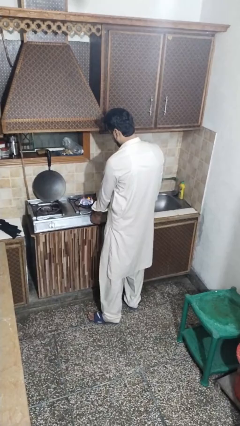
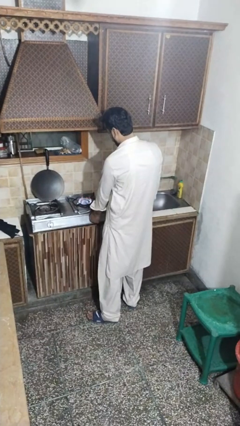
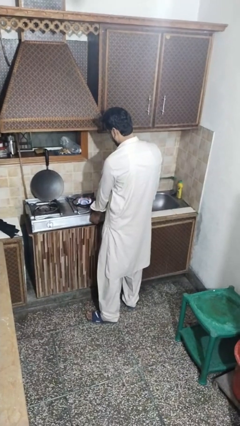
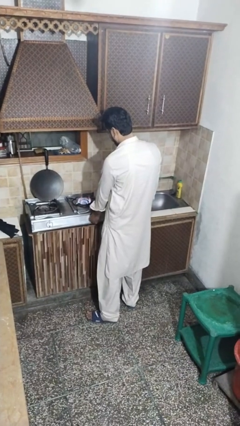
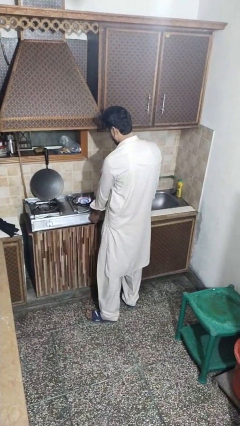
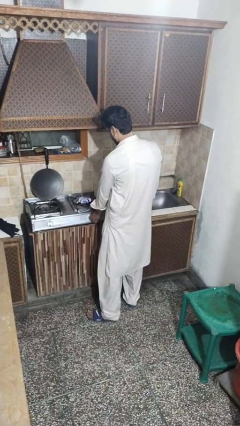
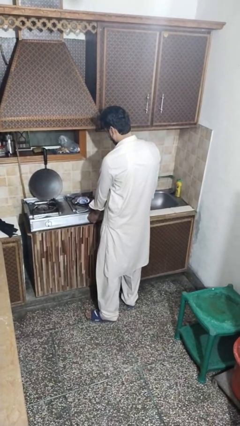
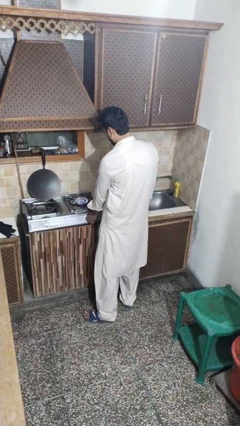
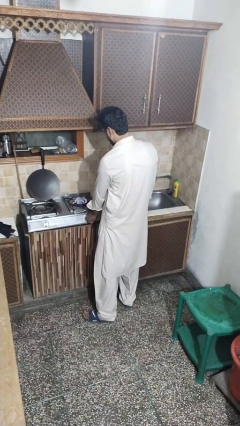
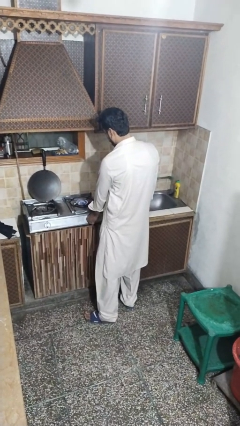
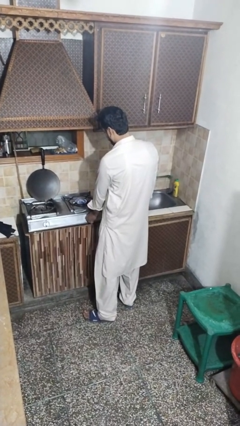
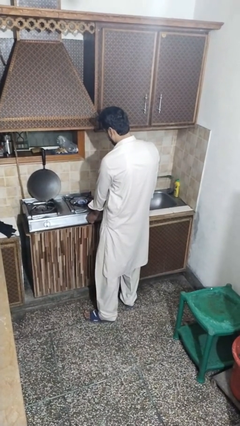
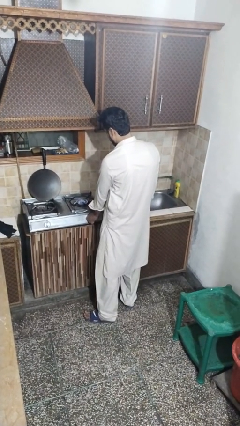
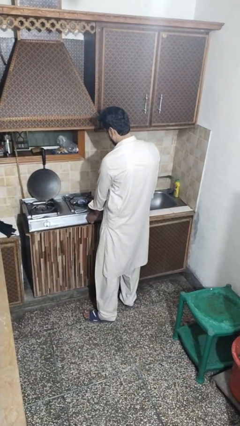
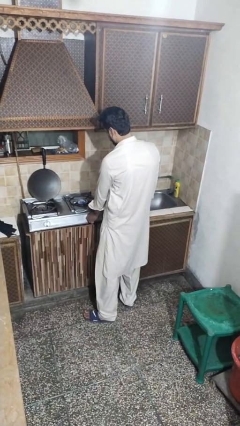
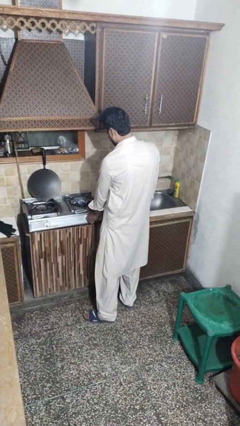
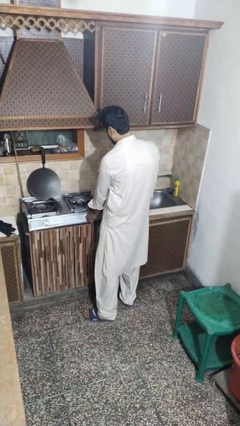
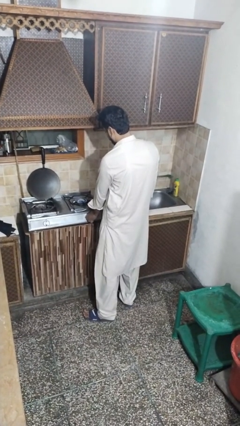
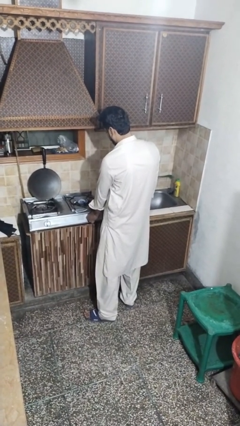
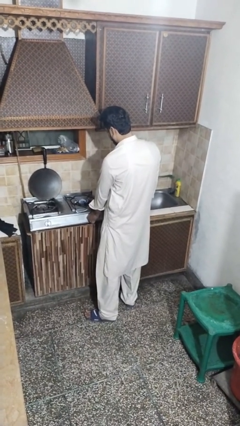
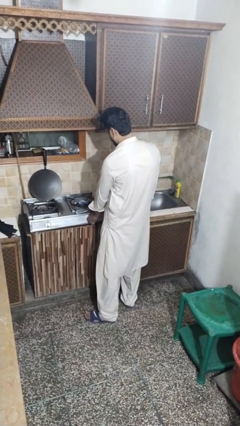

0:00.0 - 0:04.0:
person turns off stovetop

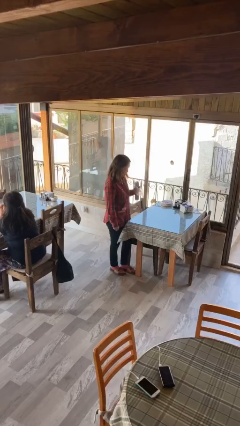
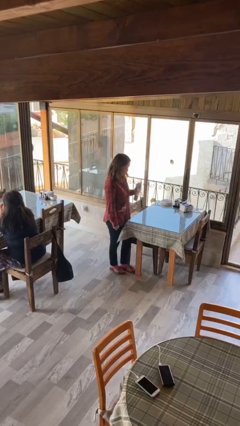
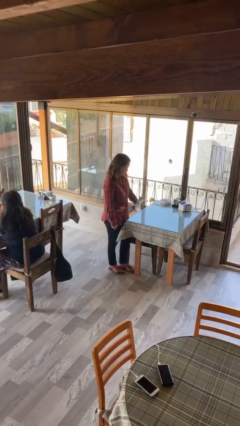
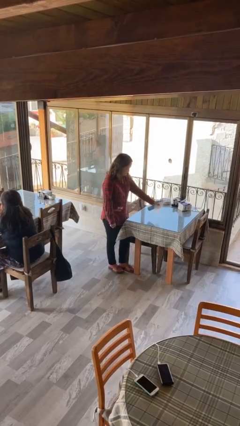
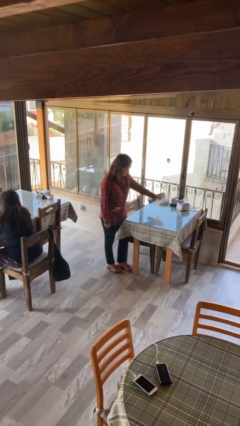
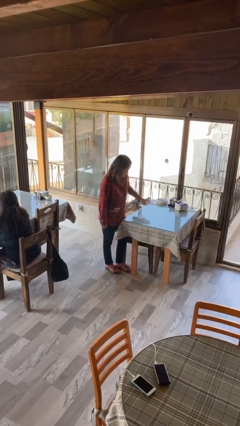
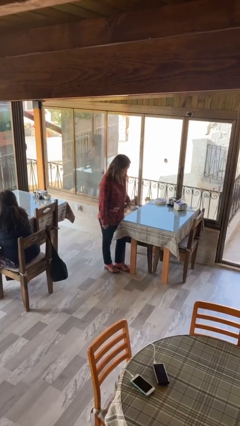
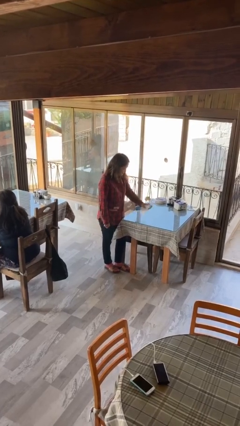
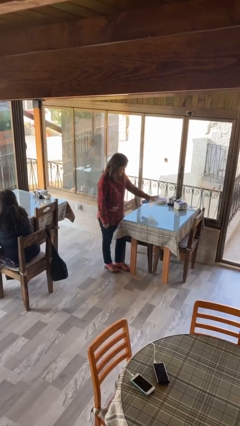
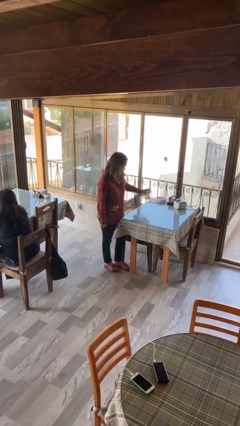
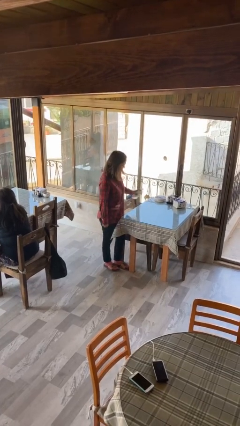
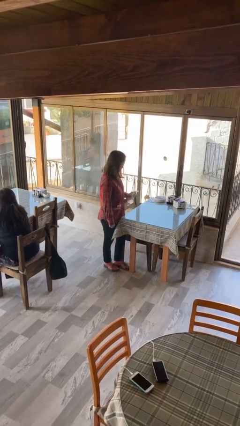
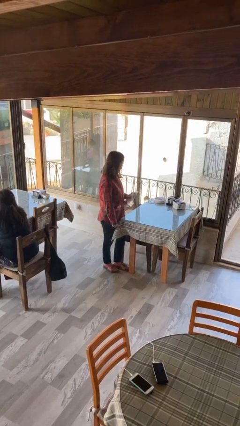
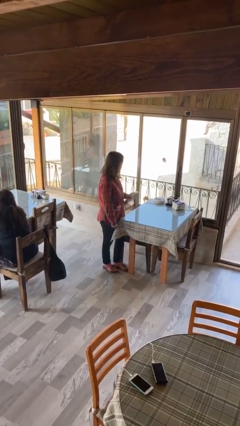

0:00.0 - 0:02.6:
person sprays from bottle

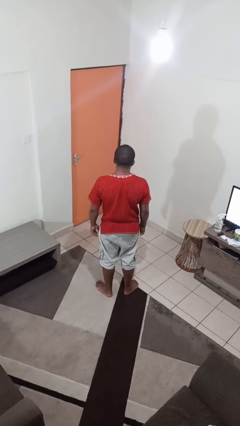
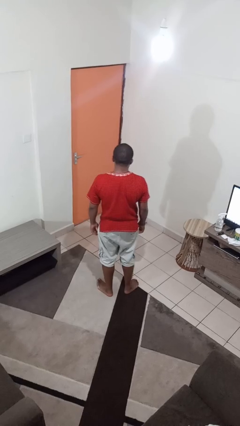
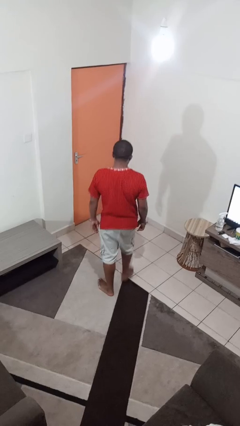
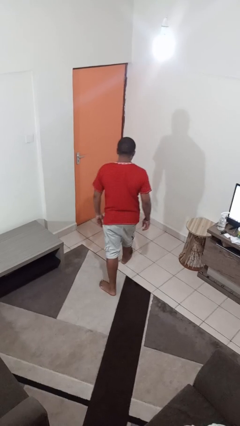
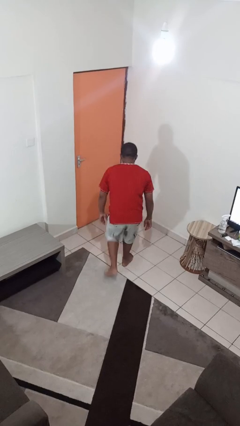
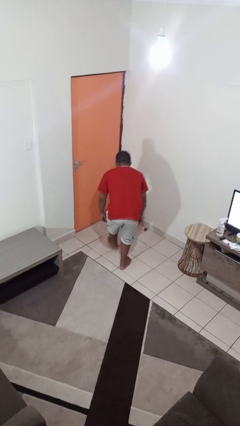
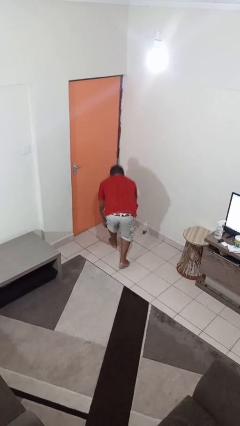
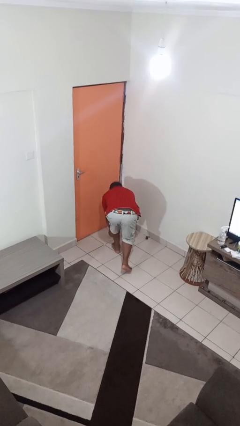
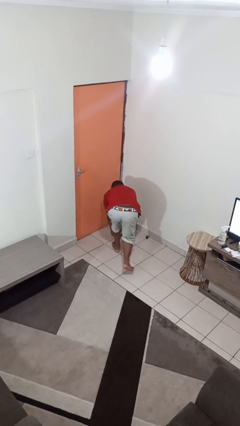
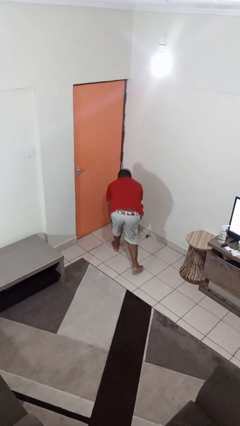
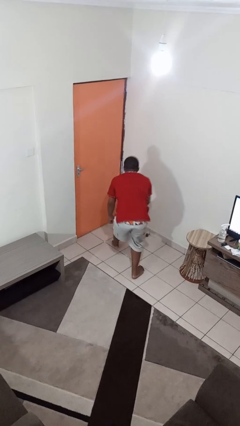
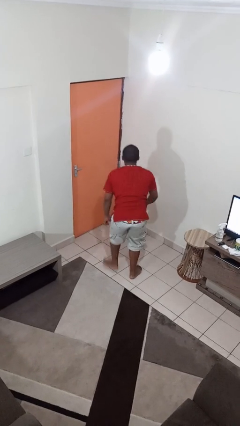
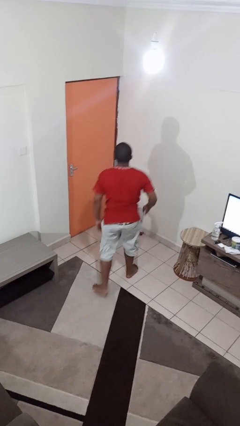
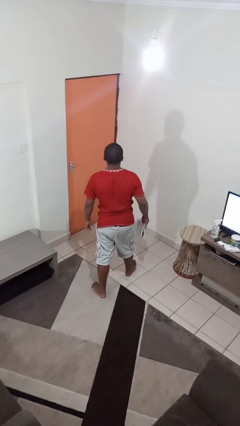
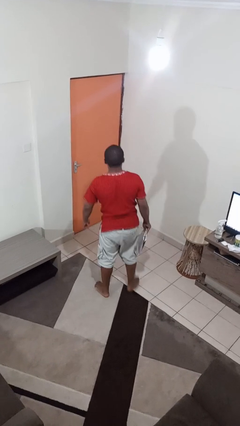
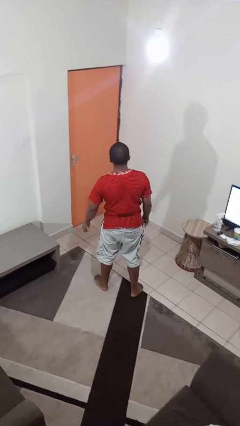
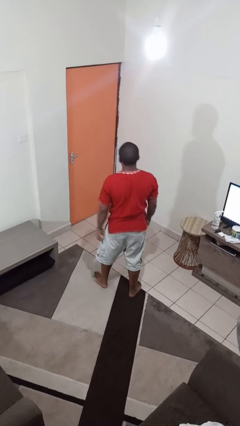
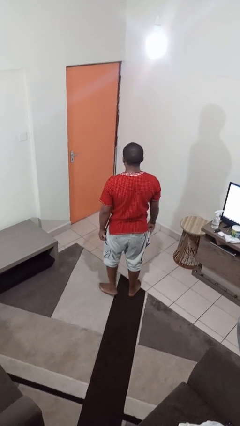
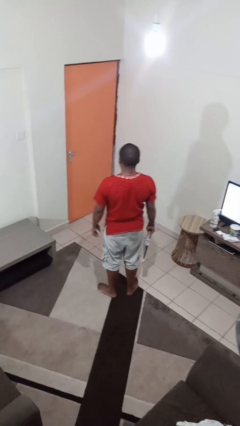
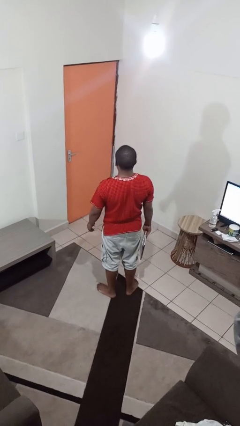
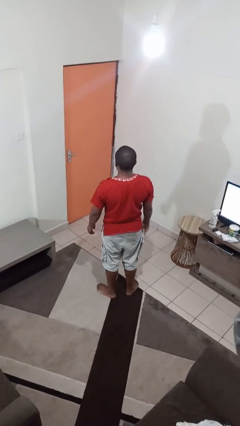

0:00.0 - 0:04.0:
person picks up object from floor

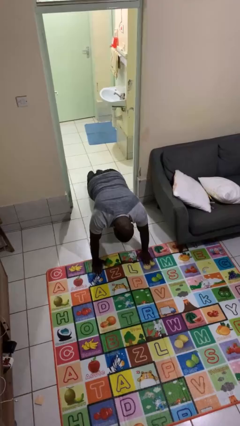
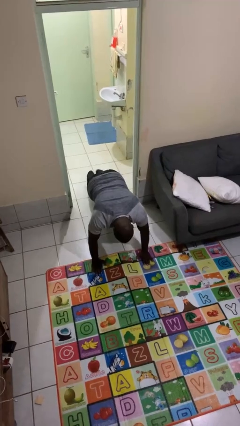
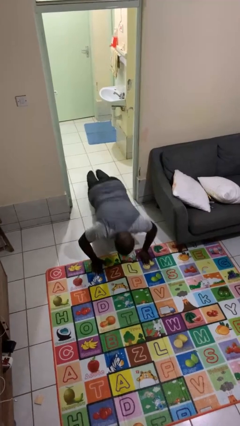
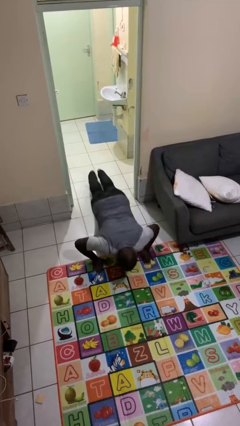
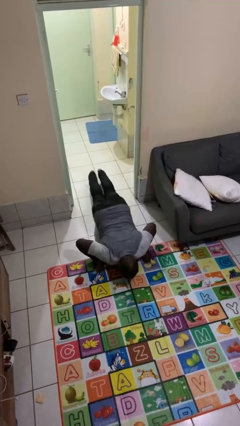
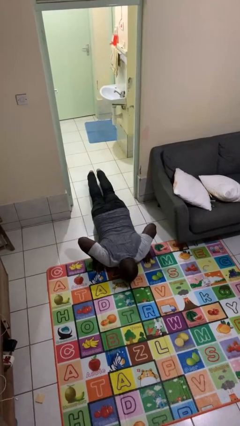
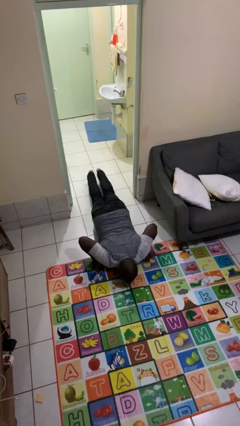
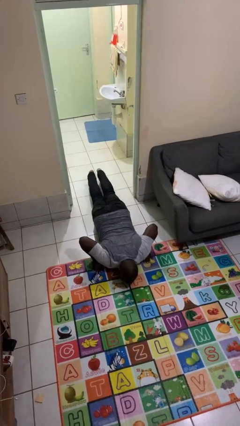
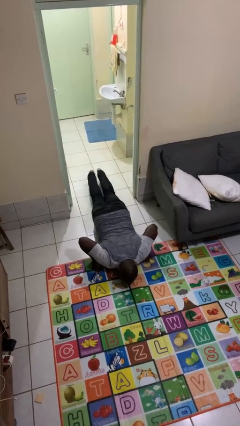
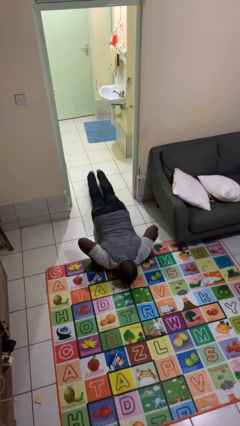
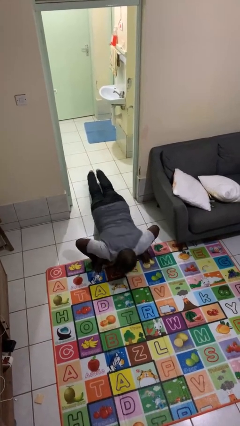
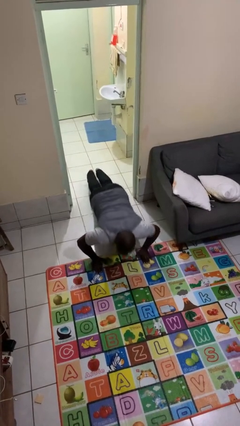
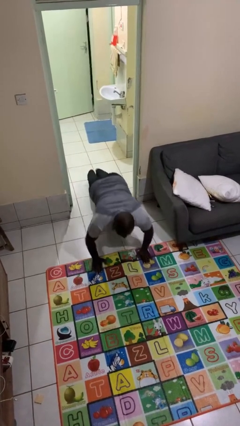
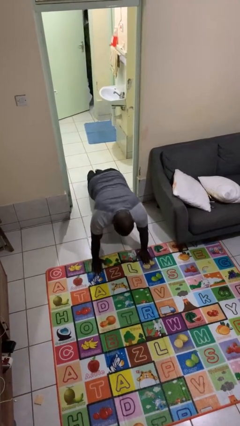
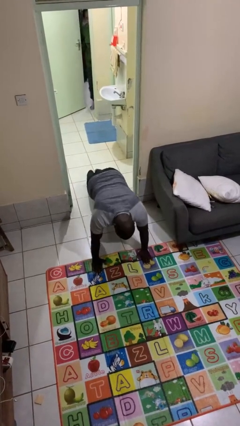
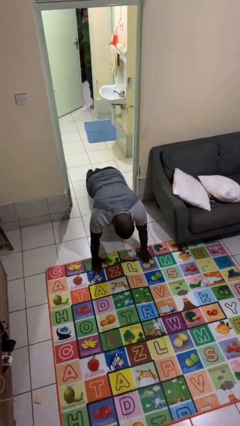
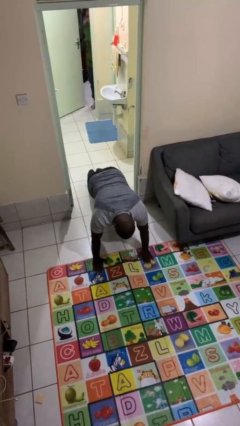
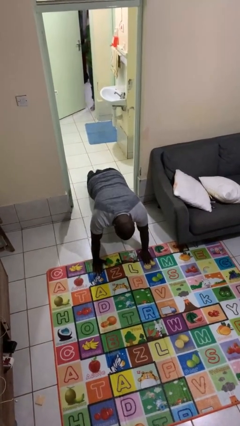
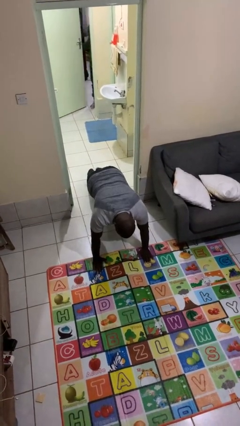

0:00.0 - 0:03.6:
person exercises with pushup

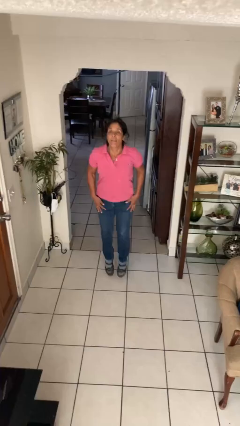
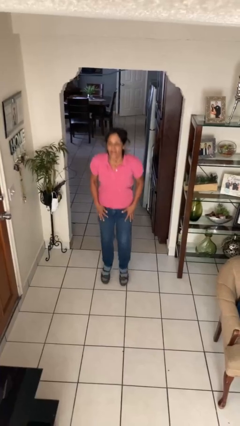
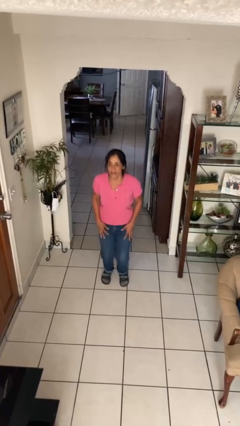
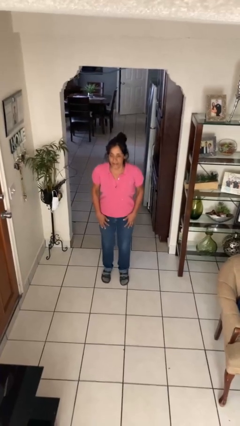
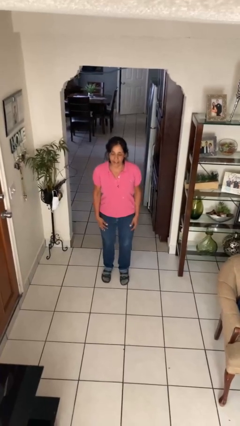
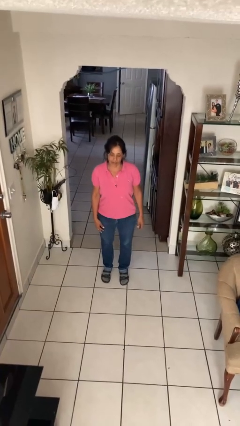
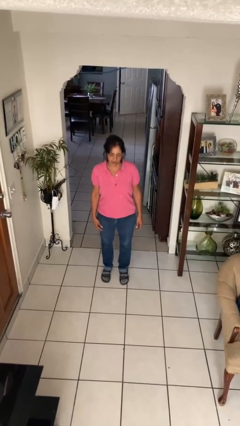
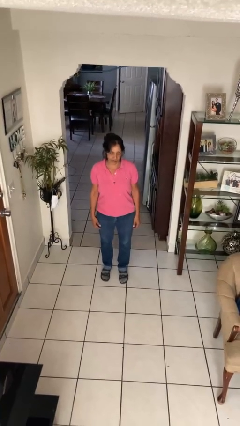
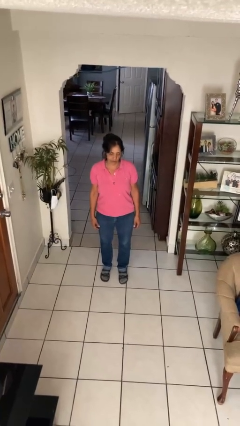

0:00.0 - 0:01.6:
person jumps

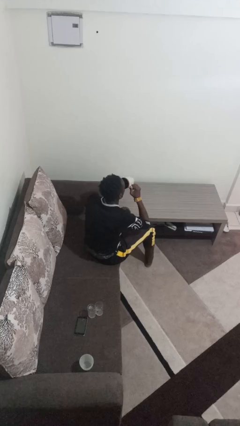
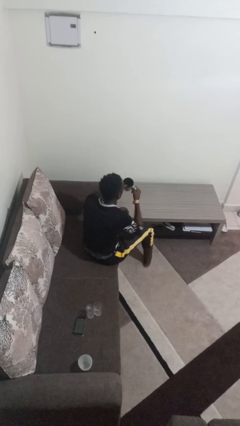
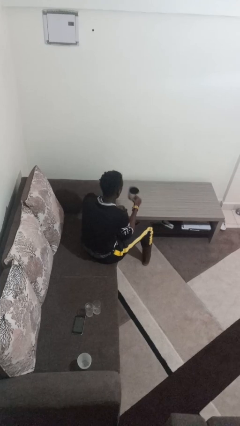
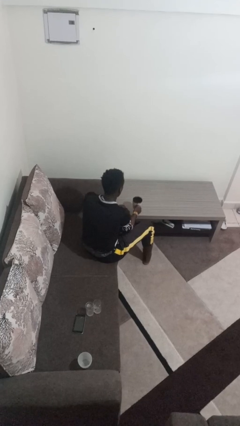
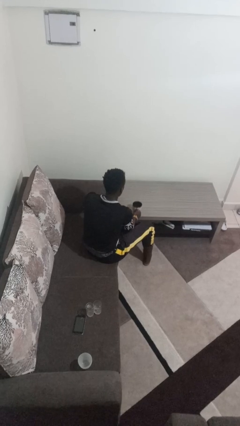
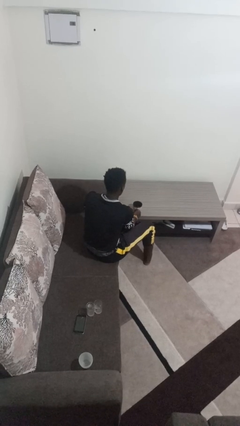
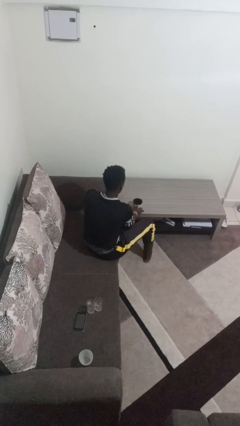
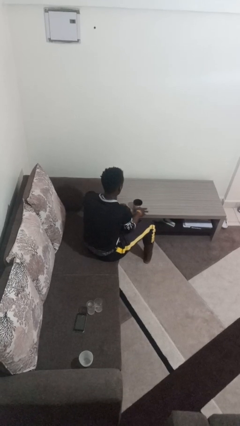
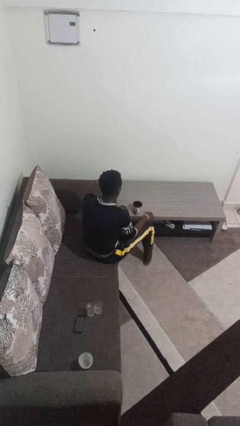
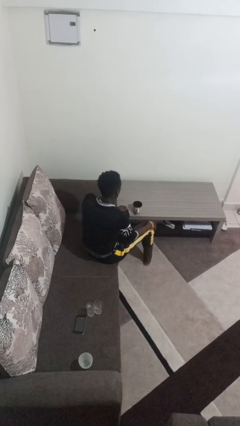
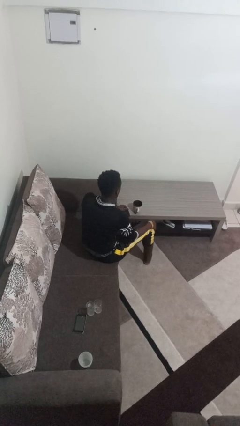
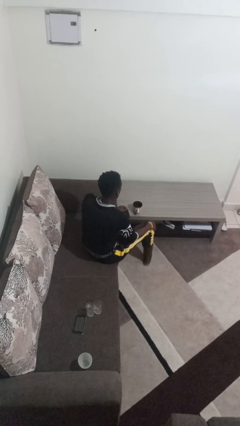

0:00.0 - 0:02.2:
person puts down object on table
